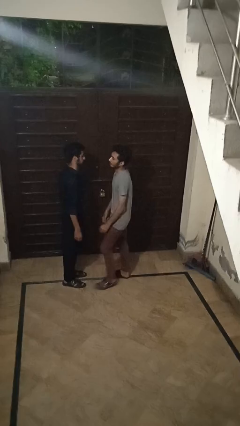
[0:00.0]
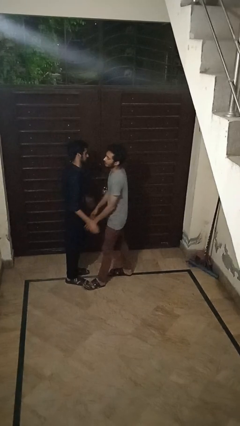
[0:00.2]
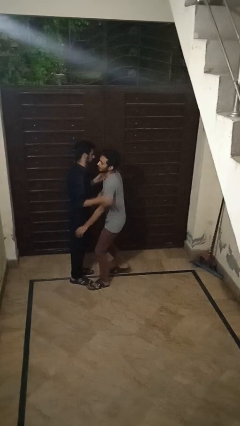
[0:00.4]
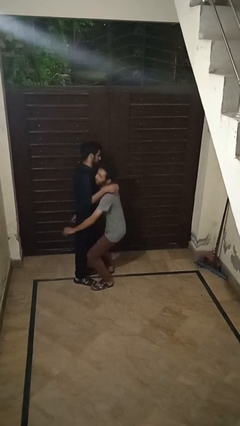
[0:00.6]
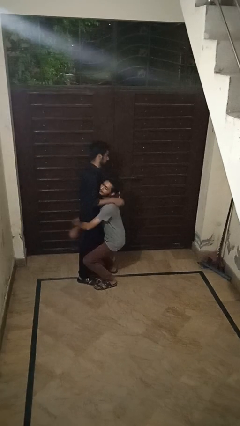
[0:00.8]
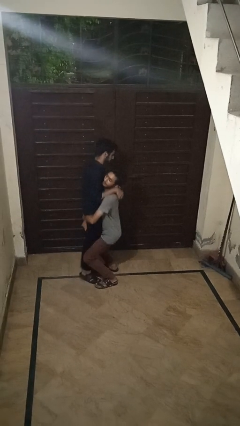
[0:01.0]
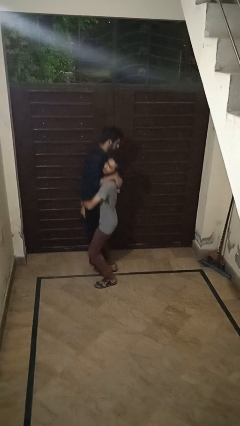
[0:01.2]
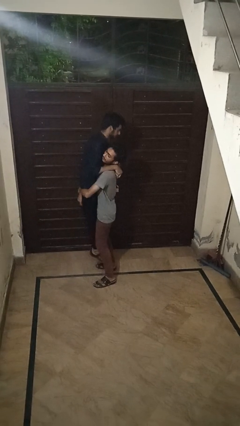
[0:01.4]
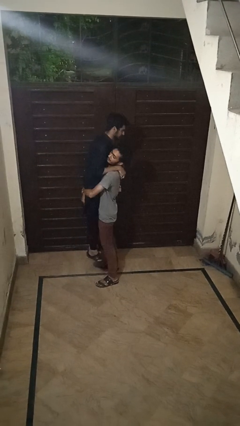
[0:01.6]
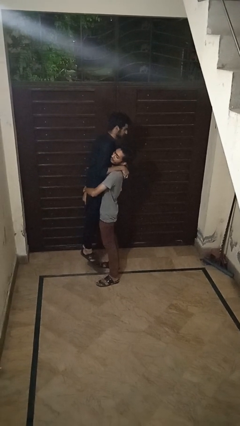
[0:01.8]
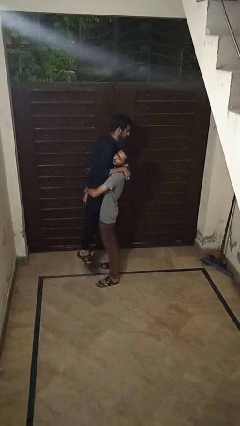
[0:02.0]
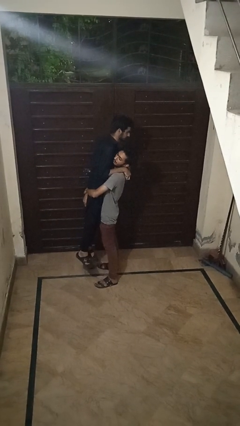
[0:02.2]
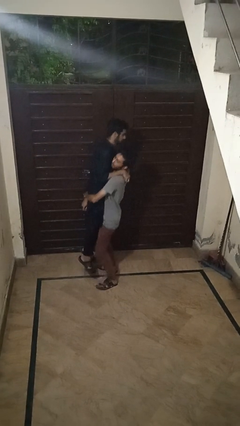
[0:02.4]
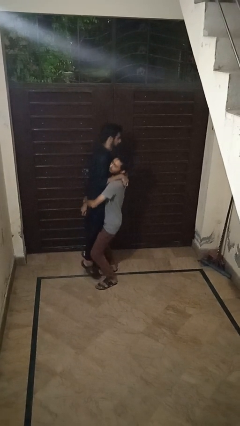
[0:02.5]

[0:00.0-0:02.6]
person picks up person

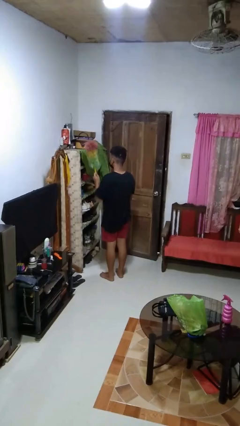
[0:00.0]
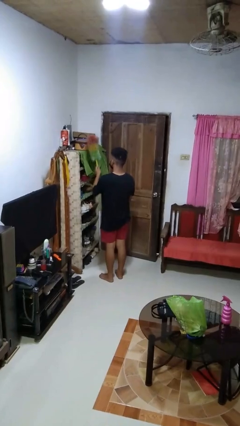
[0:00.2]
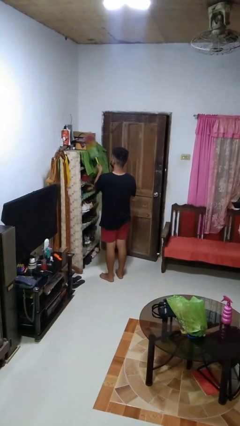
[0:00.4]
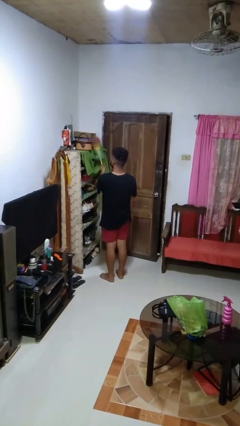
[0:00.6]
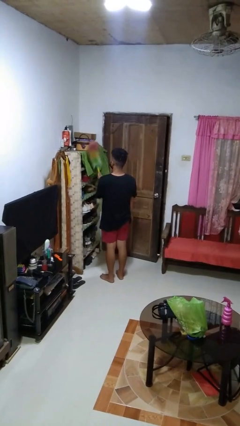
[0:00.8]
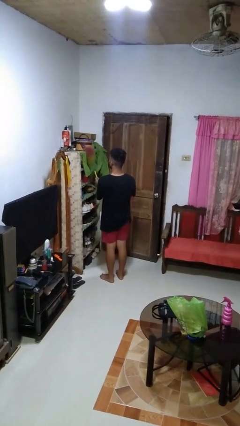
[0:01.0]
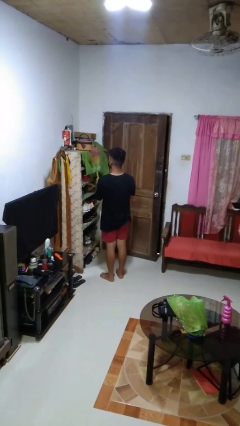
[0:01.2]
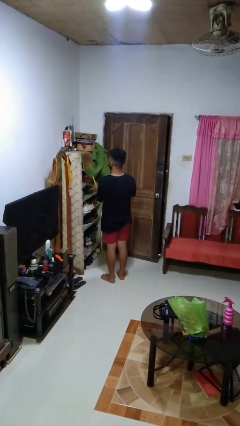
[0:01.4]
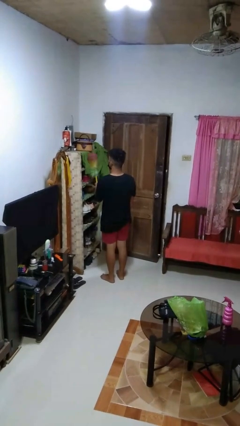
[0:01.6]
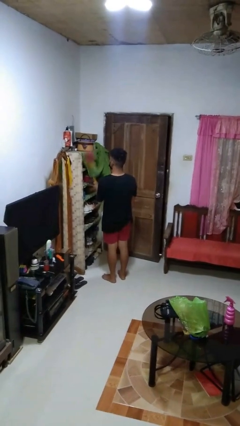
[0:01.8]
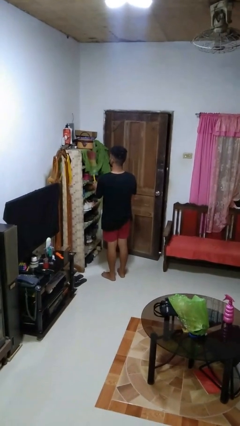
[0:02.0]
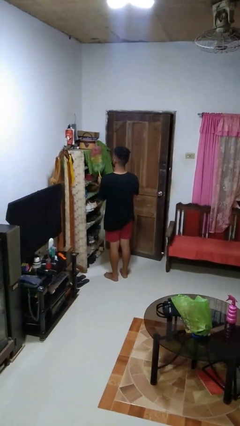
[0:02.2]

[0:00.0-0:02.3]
person dusts furniture

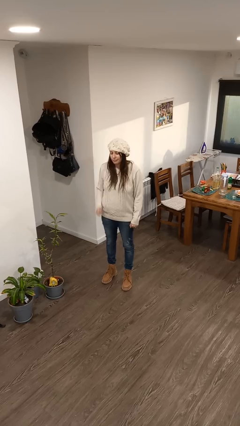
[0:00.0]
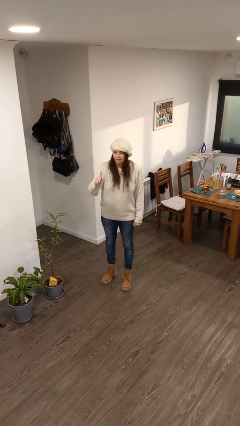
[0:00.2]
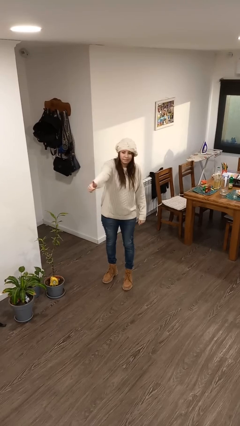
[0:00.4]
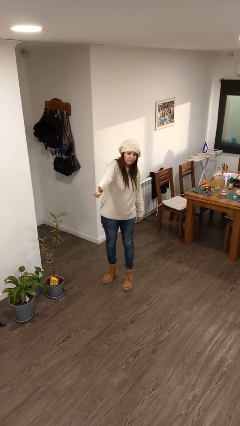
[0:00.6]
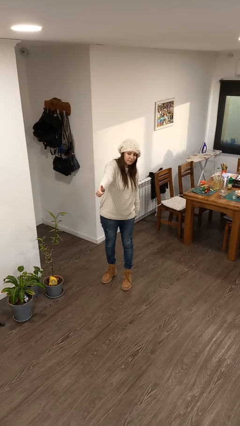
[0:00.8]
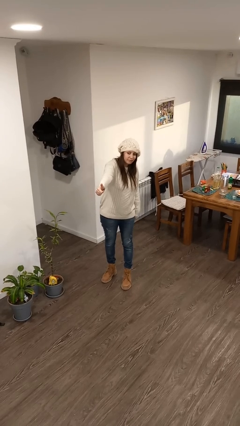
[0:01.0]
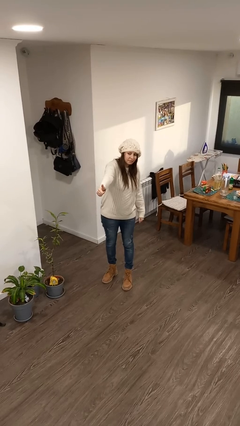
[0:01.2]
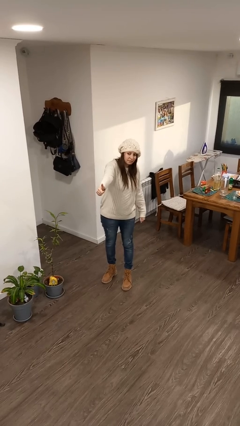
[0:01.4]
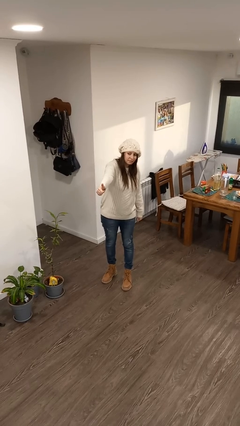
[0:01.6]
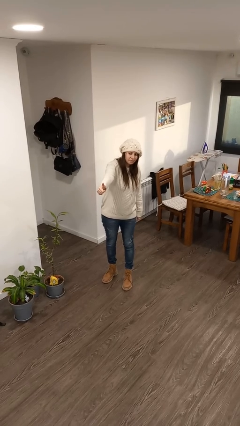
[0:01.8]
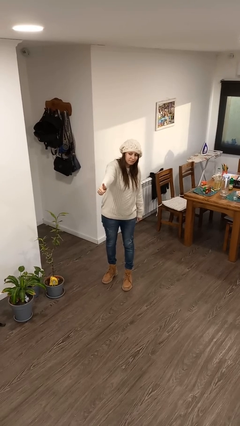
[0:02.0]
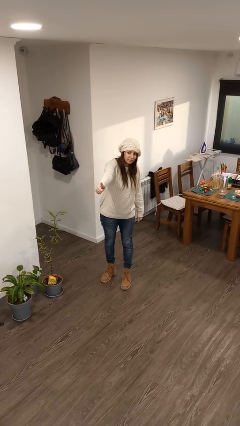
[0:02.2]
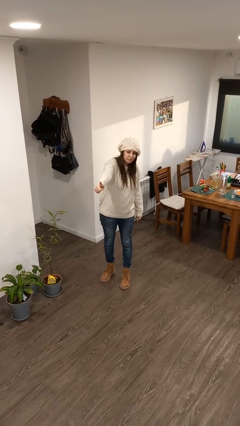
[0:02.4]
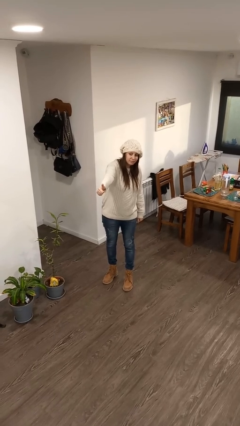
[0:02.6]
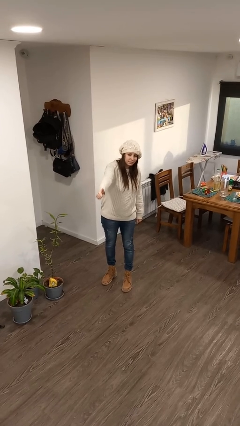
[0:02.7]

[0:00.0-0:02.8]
person gestures thumbs up

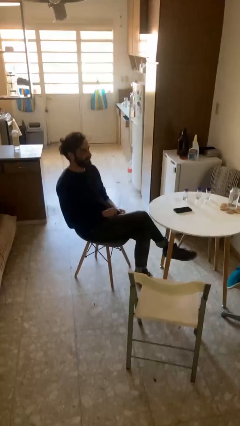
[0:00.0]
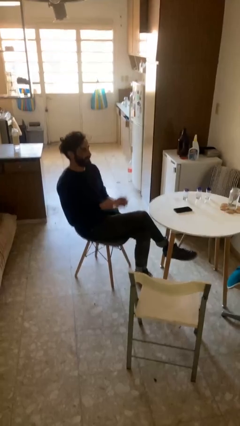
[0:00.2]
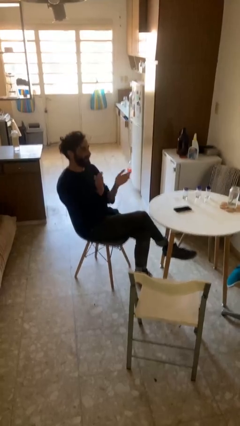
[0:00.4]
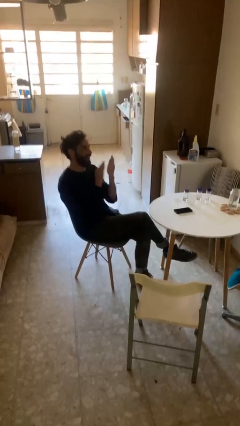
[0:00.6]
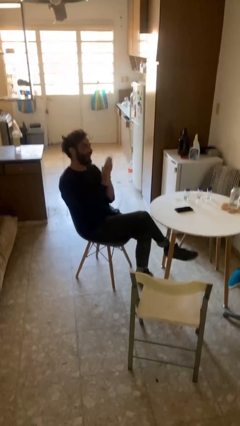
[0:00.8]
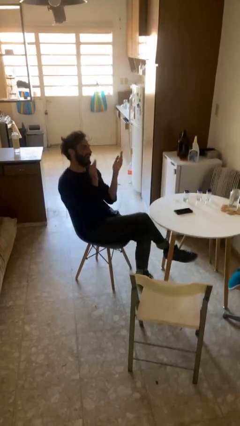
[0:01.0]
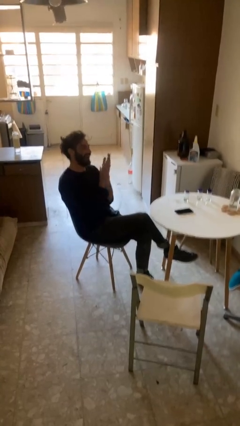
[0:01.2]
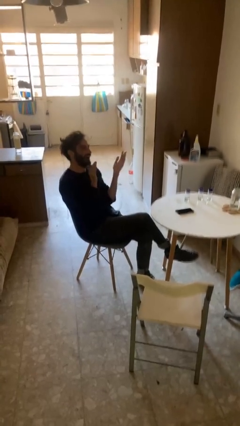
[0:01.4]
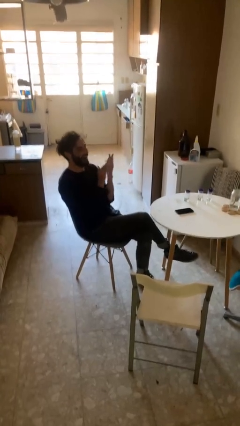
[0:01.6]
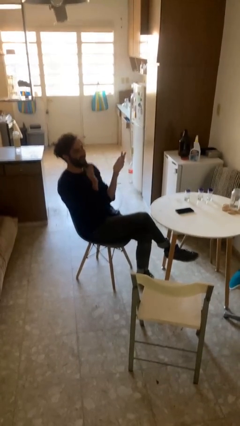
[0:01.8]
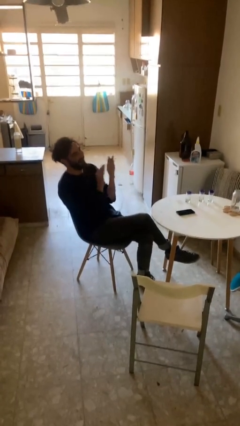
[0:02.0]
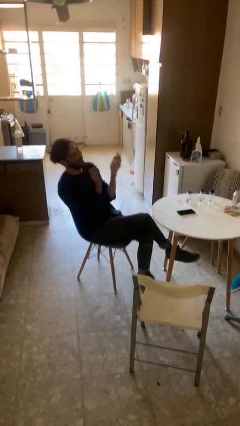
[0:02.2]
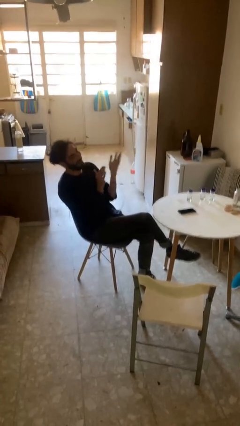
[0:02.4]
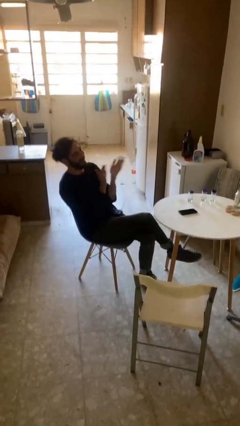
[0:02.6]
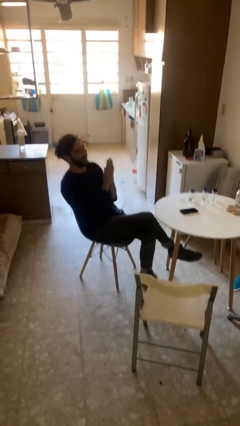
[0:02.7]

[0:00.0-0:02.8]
person claps hands

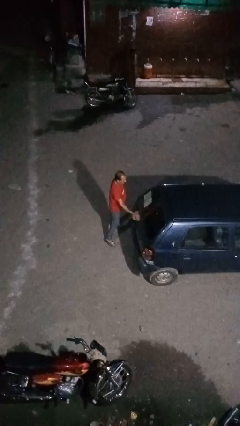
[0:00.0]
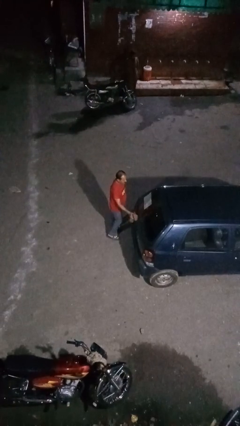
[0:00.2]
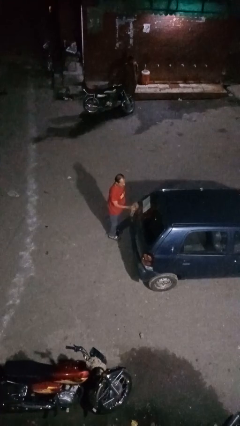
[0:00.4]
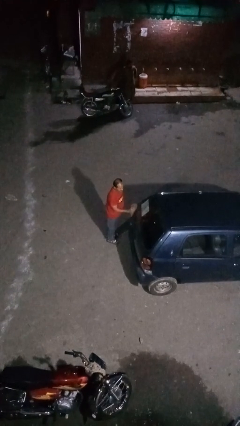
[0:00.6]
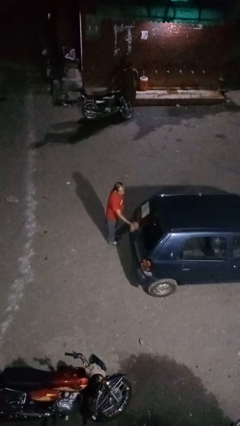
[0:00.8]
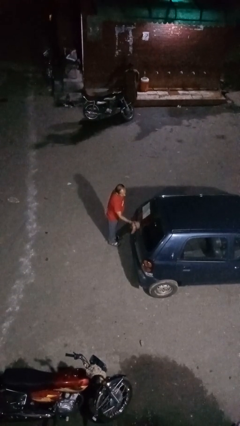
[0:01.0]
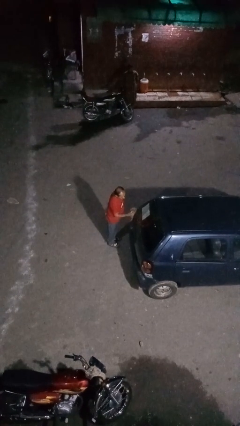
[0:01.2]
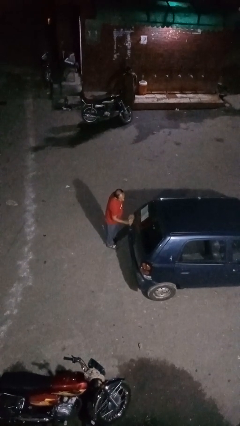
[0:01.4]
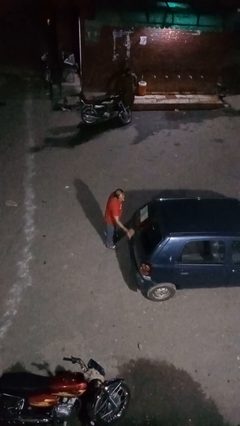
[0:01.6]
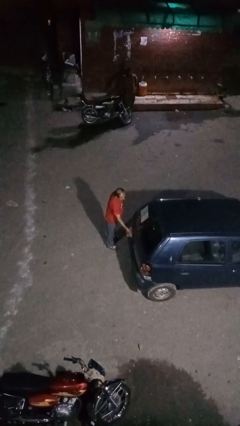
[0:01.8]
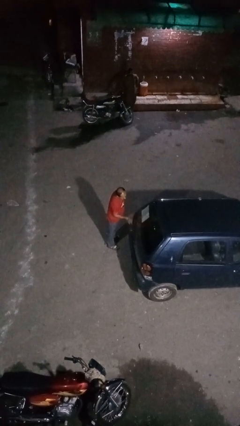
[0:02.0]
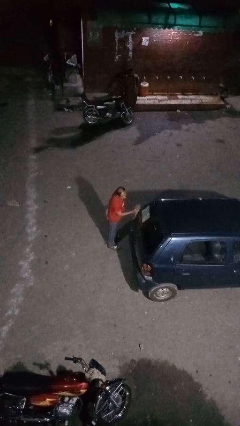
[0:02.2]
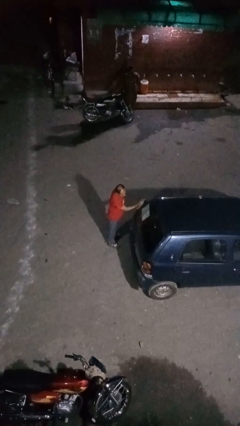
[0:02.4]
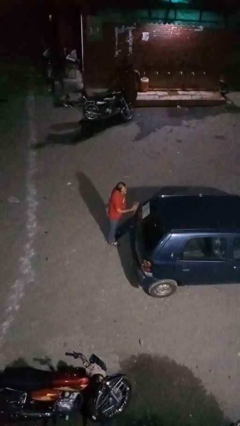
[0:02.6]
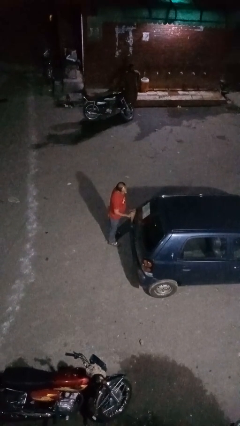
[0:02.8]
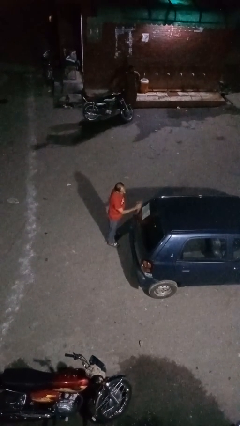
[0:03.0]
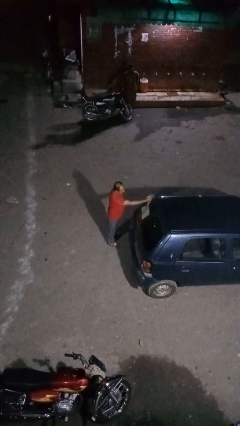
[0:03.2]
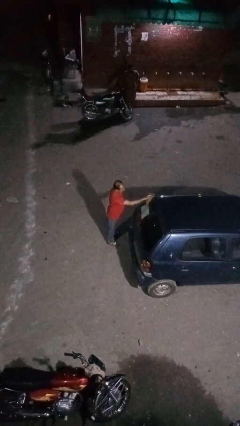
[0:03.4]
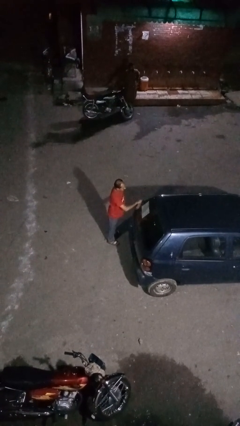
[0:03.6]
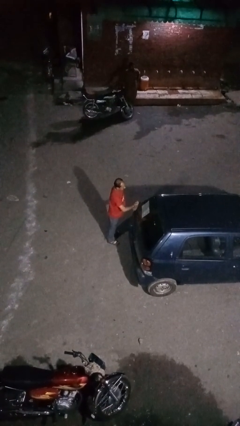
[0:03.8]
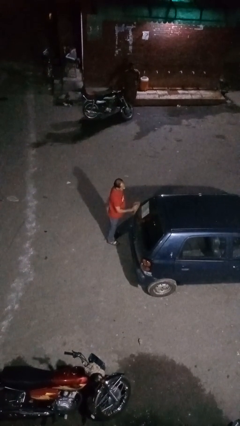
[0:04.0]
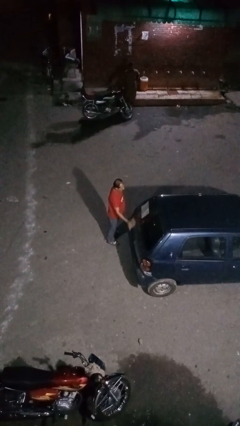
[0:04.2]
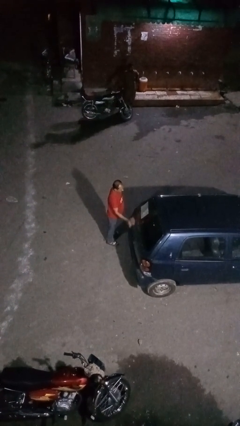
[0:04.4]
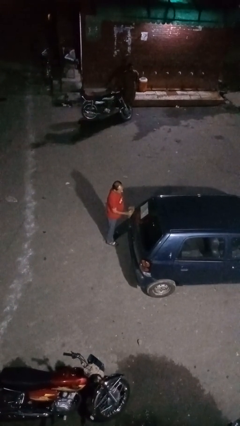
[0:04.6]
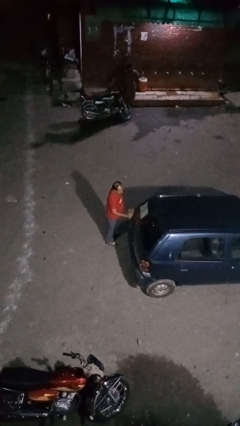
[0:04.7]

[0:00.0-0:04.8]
person polishes car with rag

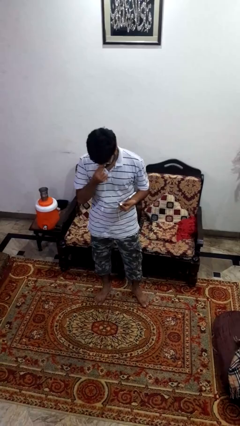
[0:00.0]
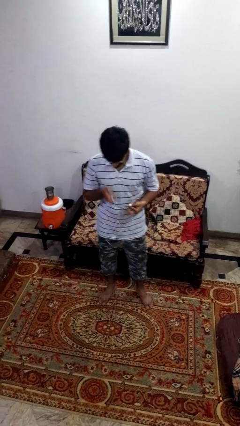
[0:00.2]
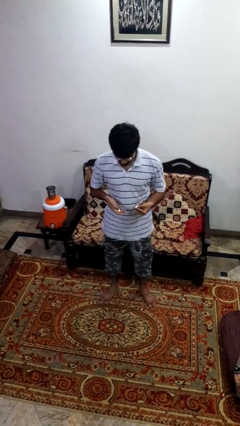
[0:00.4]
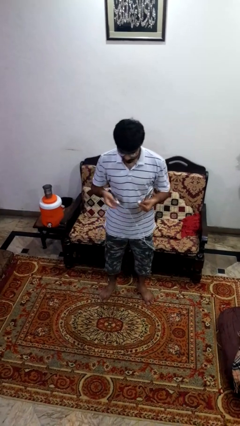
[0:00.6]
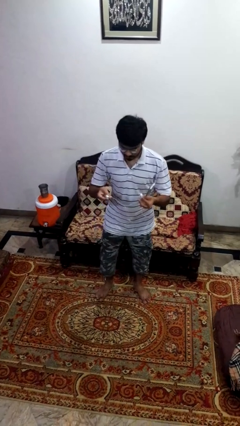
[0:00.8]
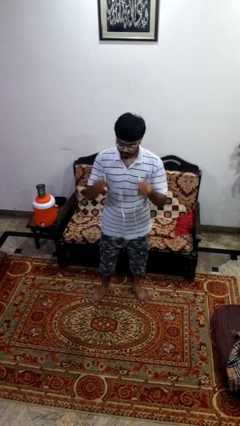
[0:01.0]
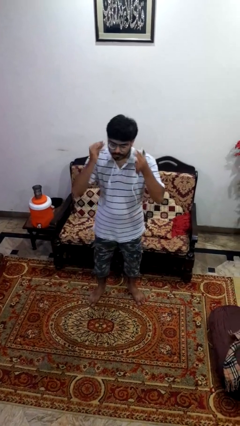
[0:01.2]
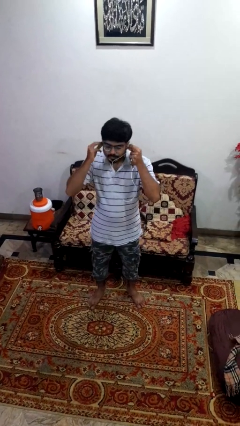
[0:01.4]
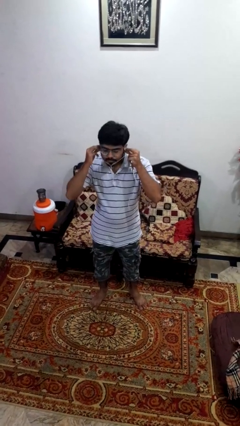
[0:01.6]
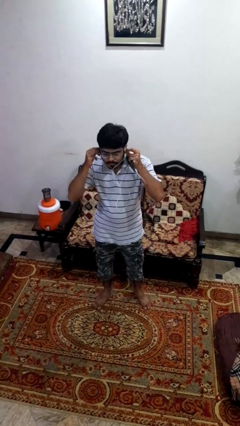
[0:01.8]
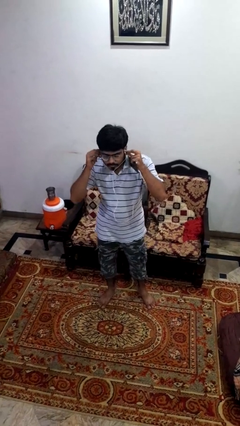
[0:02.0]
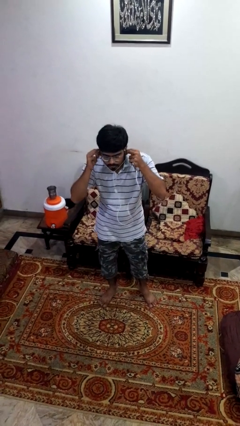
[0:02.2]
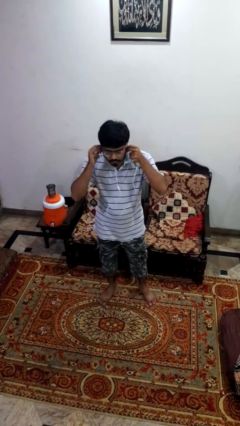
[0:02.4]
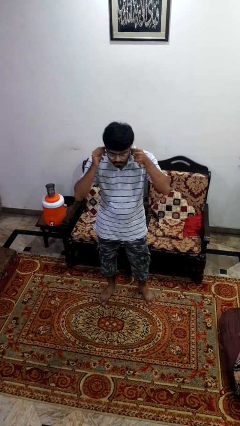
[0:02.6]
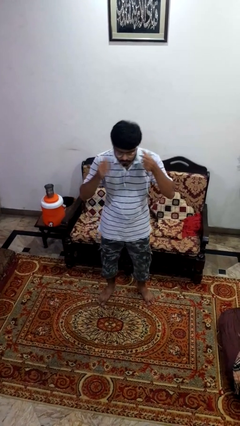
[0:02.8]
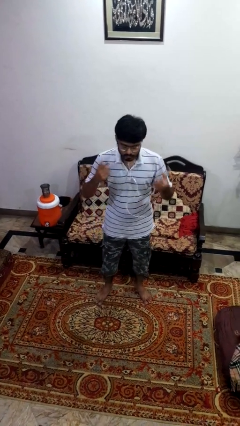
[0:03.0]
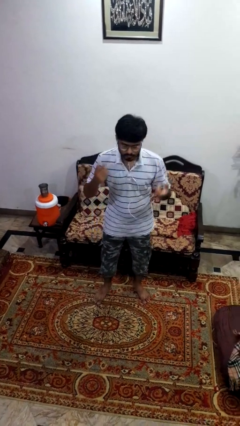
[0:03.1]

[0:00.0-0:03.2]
person puts on headphones
